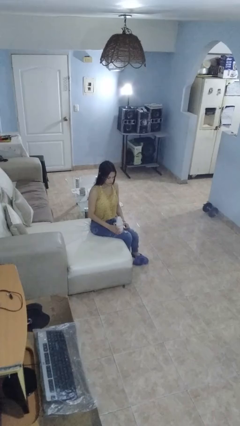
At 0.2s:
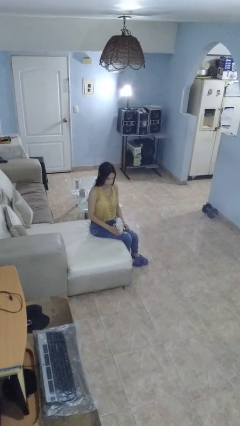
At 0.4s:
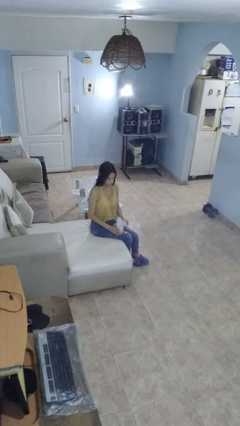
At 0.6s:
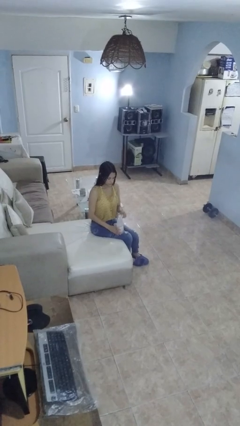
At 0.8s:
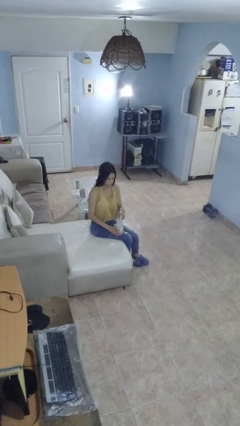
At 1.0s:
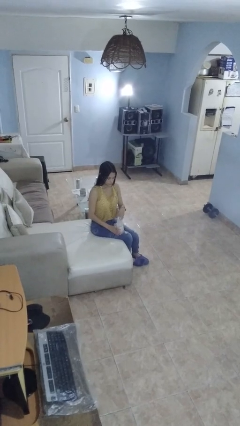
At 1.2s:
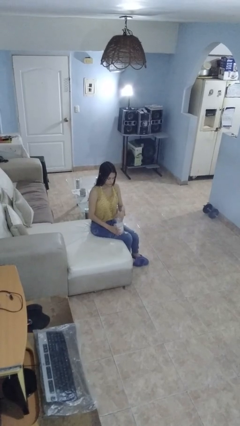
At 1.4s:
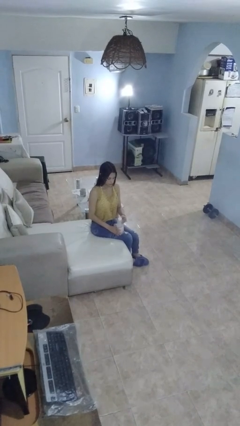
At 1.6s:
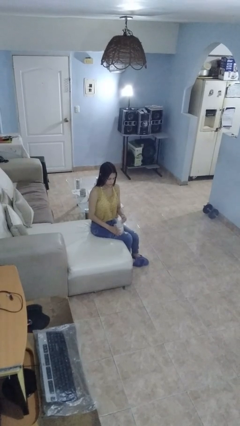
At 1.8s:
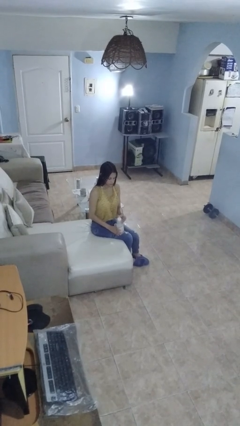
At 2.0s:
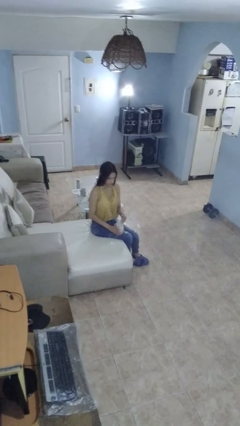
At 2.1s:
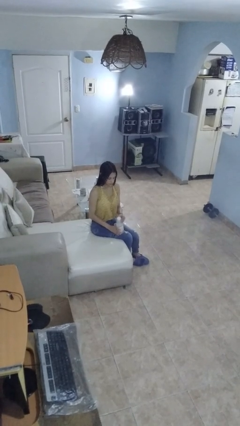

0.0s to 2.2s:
person screws lid to bottle

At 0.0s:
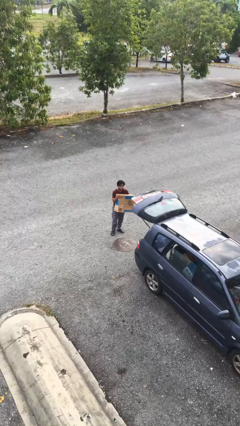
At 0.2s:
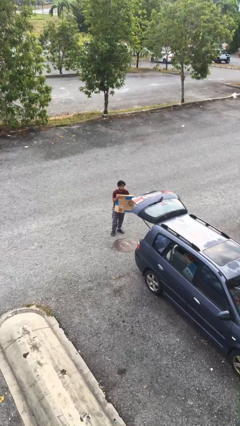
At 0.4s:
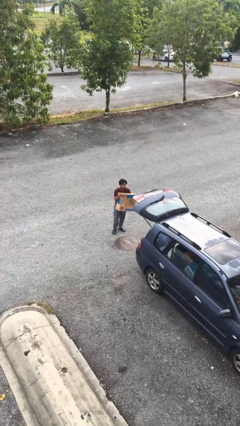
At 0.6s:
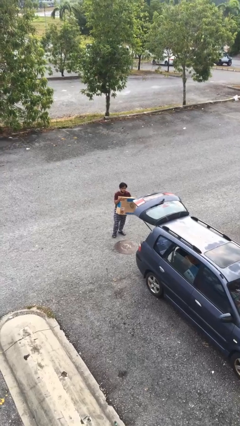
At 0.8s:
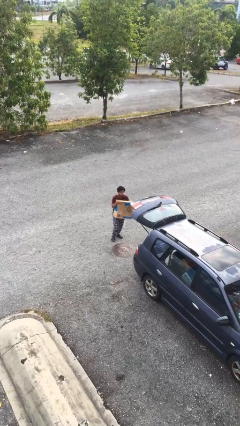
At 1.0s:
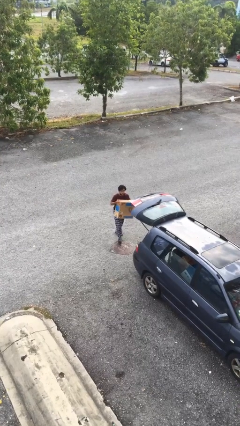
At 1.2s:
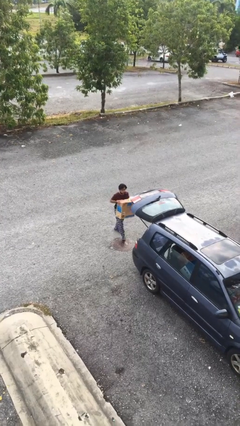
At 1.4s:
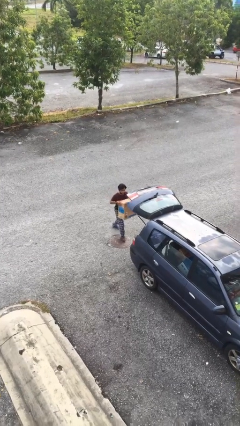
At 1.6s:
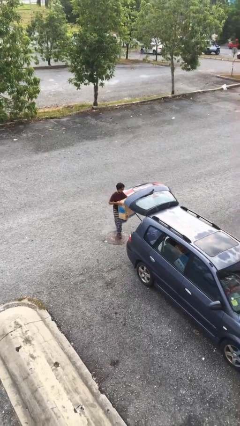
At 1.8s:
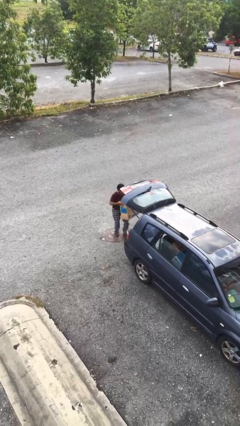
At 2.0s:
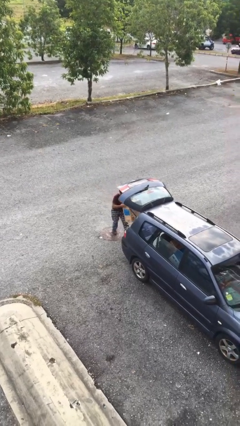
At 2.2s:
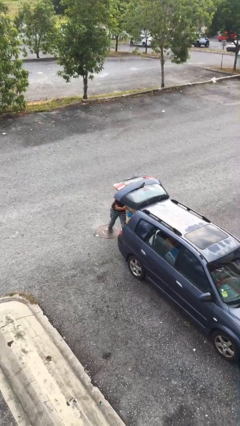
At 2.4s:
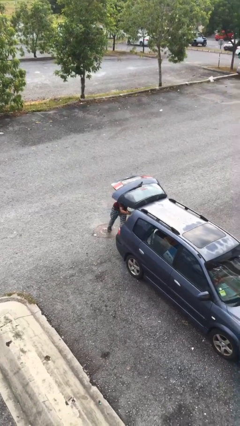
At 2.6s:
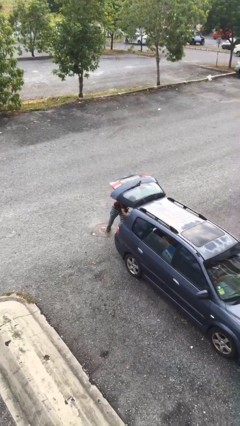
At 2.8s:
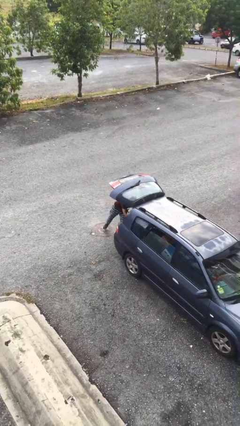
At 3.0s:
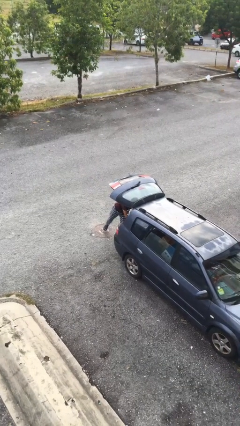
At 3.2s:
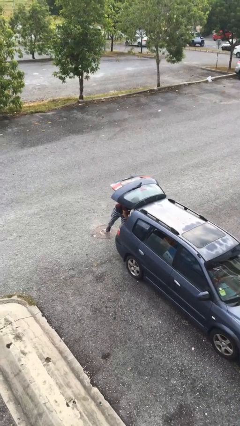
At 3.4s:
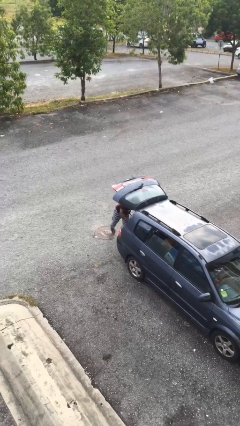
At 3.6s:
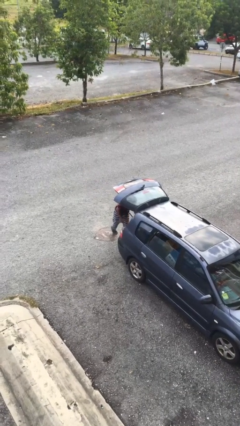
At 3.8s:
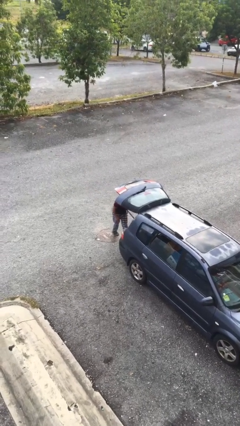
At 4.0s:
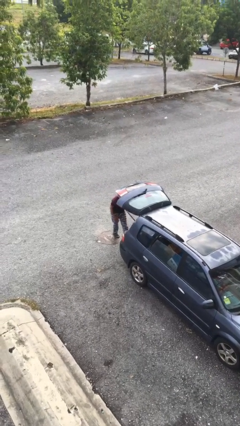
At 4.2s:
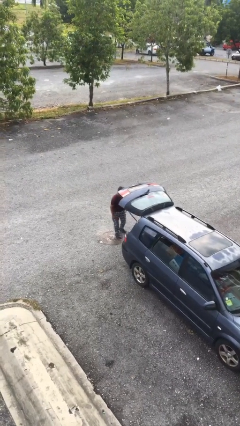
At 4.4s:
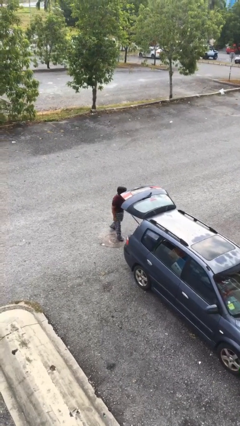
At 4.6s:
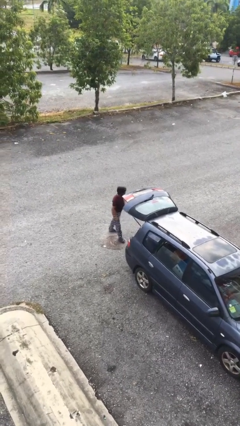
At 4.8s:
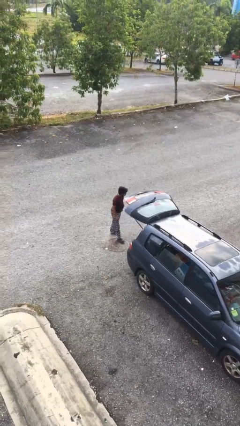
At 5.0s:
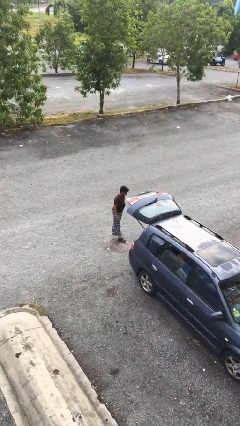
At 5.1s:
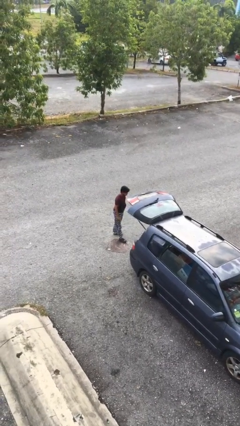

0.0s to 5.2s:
person loads car

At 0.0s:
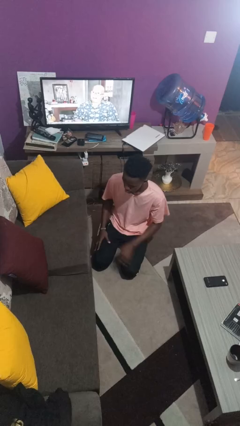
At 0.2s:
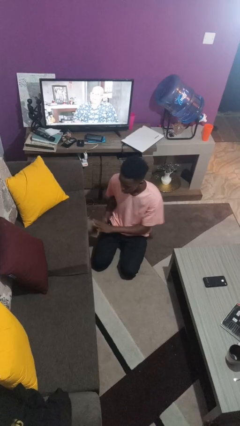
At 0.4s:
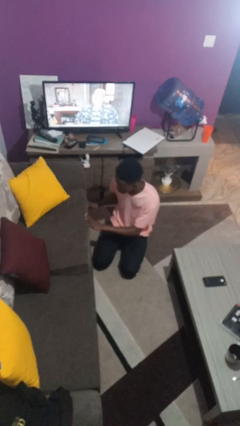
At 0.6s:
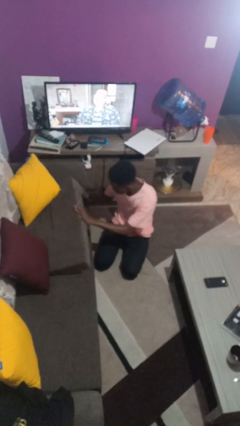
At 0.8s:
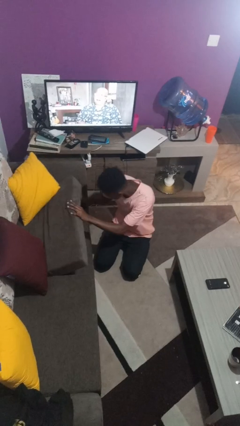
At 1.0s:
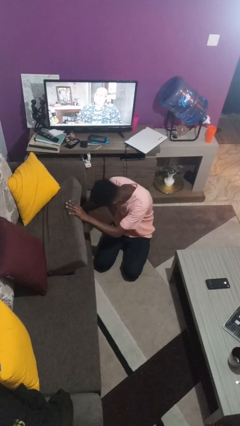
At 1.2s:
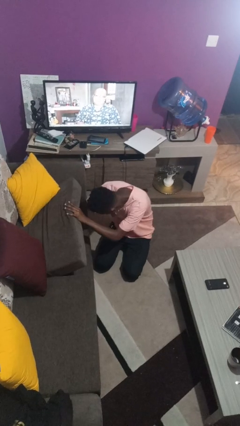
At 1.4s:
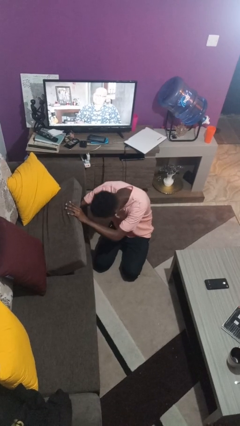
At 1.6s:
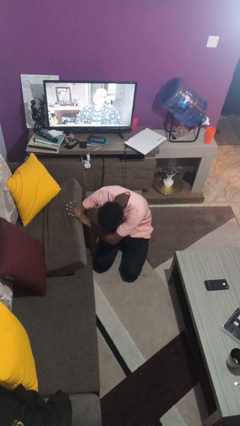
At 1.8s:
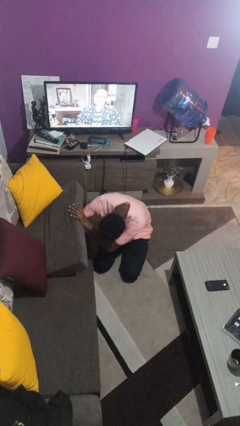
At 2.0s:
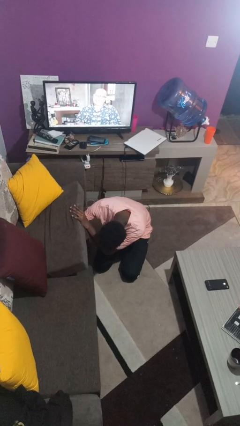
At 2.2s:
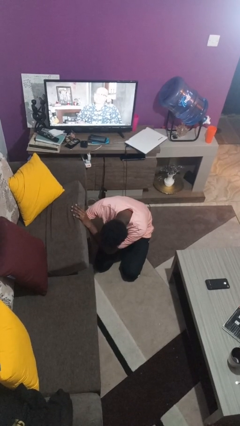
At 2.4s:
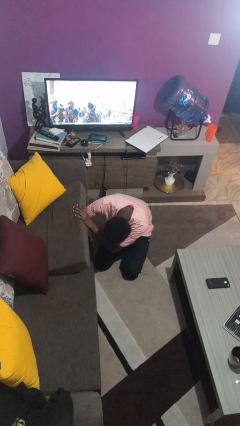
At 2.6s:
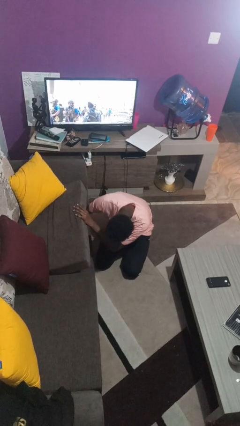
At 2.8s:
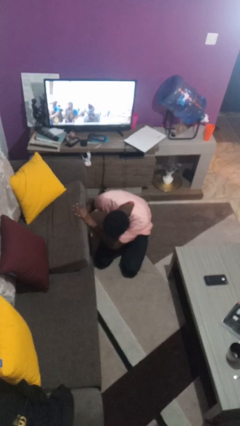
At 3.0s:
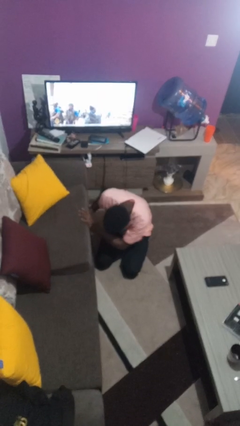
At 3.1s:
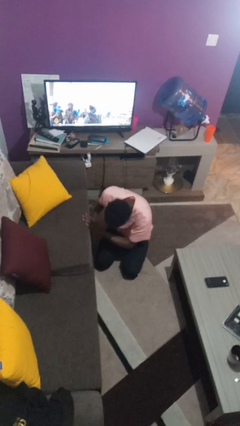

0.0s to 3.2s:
person searches under couch

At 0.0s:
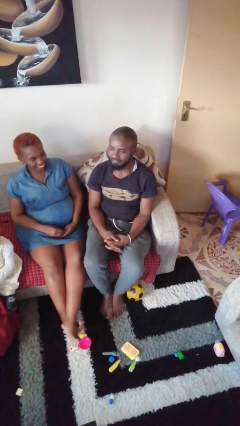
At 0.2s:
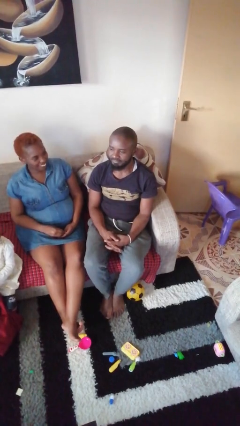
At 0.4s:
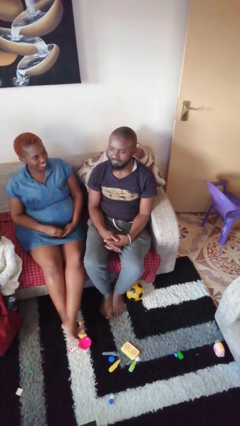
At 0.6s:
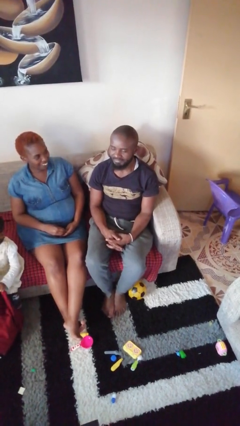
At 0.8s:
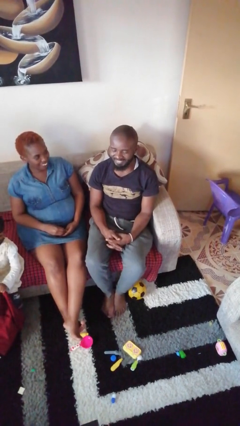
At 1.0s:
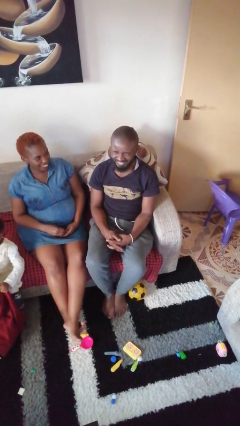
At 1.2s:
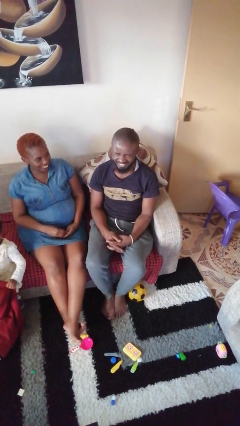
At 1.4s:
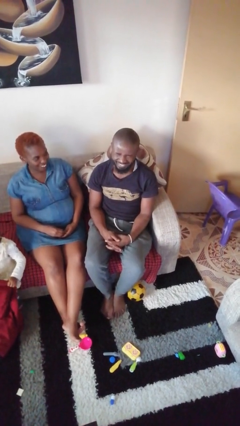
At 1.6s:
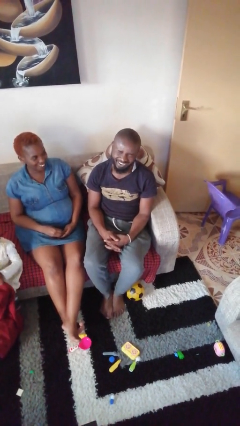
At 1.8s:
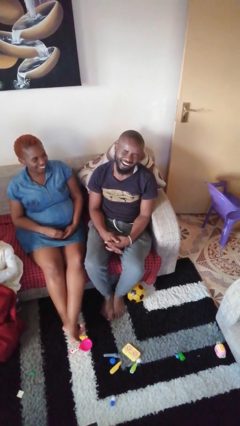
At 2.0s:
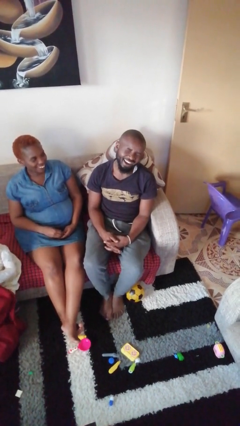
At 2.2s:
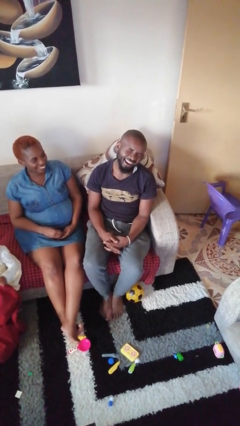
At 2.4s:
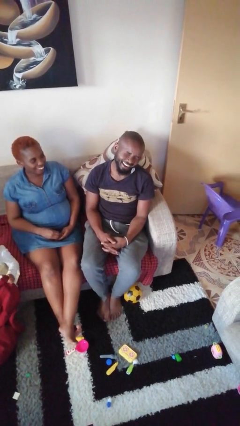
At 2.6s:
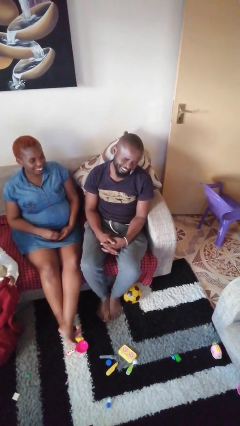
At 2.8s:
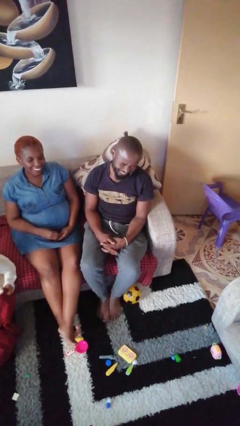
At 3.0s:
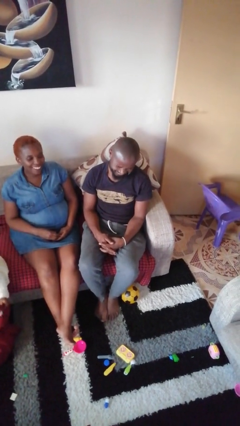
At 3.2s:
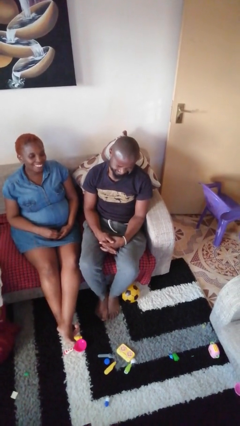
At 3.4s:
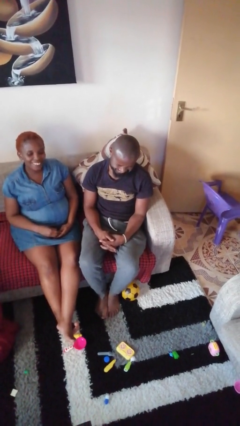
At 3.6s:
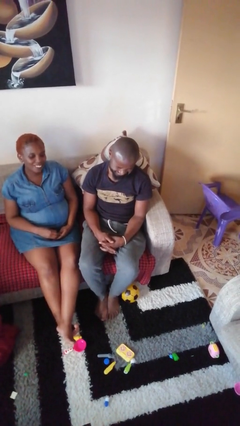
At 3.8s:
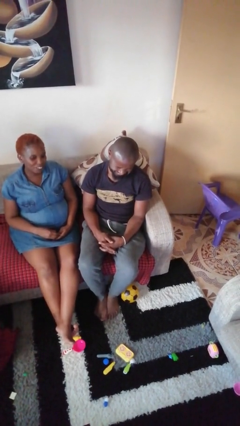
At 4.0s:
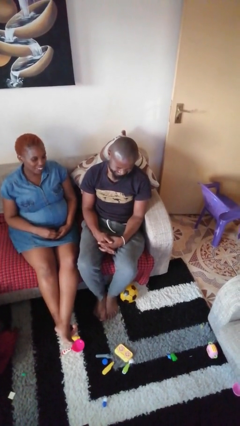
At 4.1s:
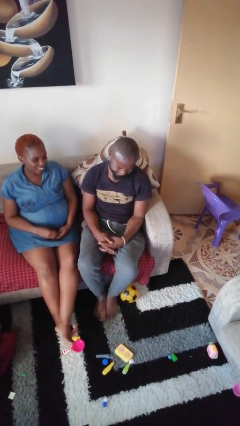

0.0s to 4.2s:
person laughs with person

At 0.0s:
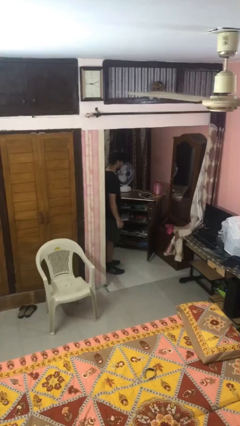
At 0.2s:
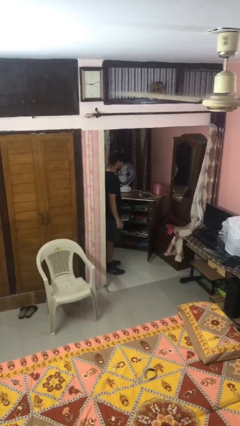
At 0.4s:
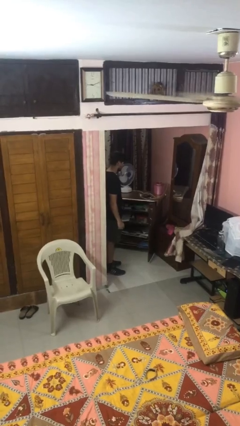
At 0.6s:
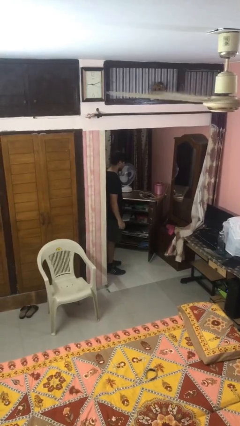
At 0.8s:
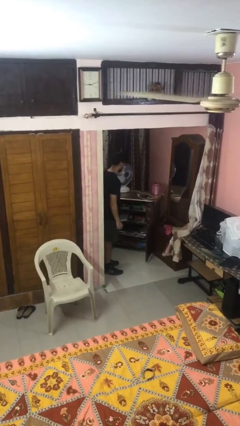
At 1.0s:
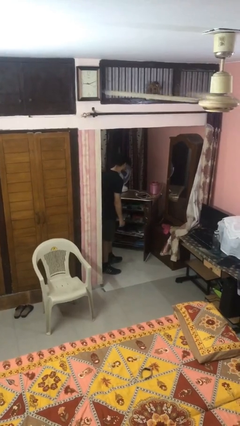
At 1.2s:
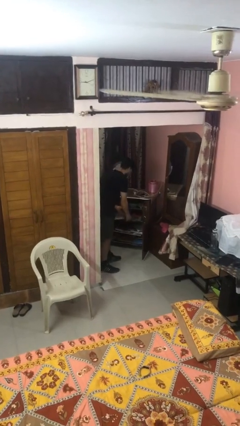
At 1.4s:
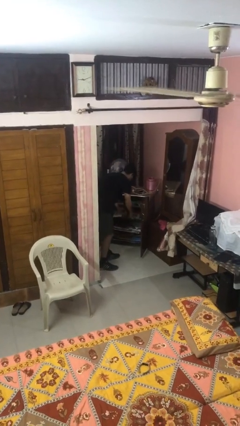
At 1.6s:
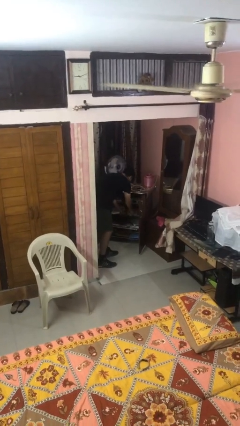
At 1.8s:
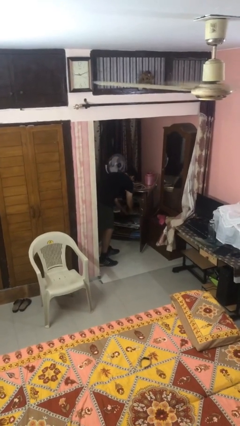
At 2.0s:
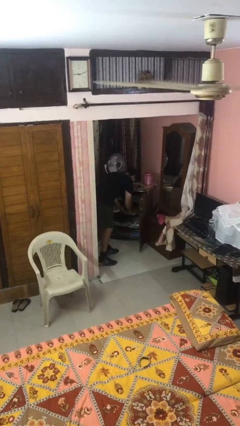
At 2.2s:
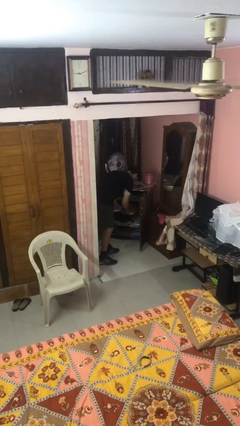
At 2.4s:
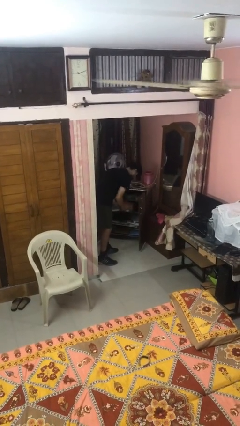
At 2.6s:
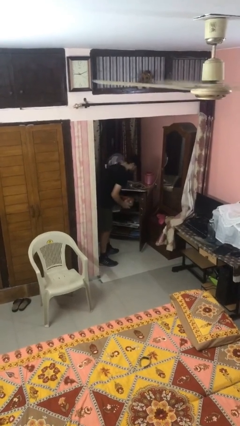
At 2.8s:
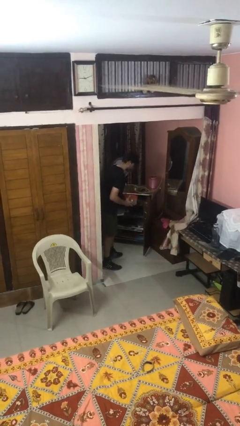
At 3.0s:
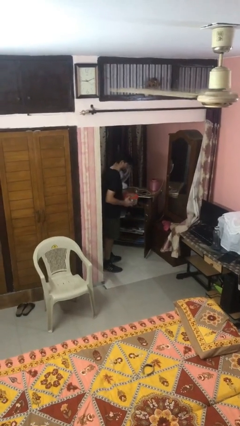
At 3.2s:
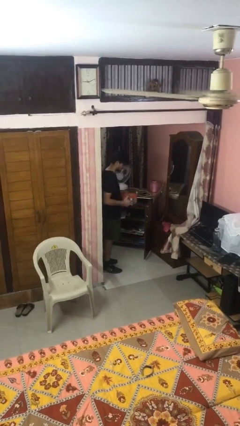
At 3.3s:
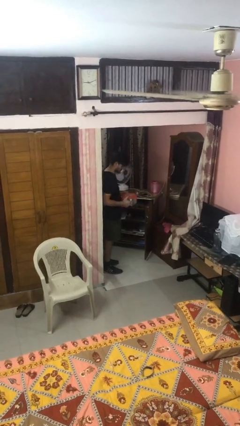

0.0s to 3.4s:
person picks up object from cabinet
